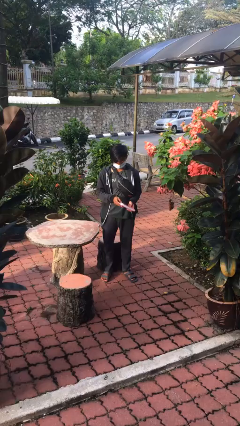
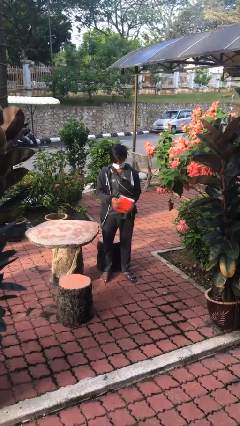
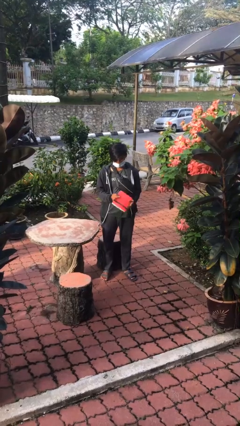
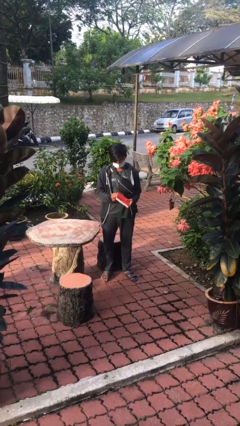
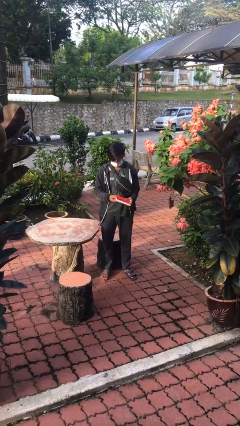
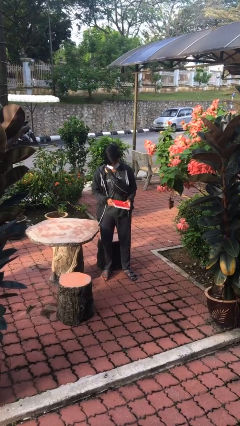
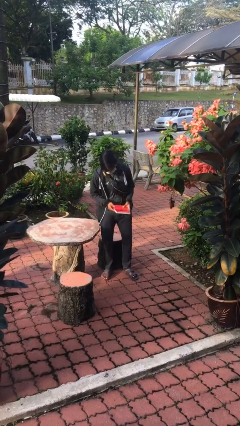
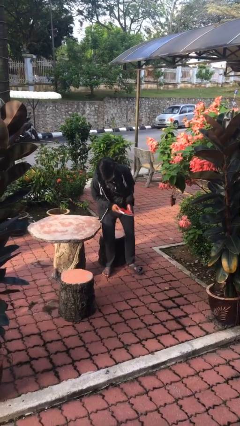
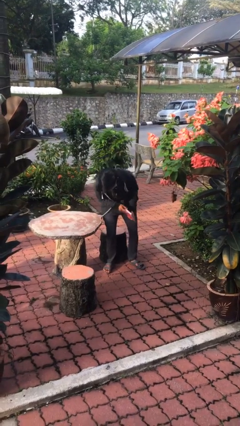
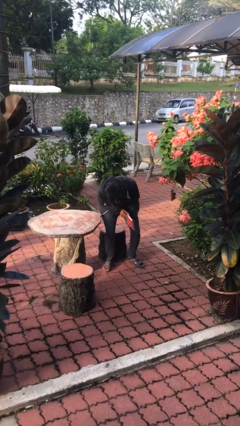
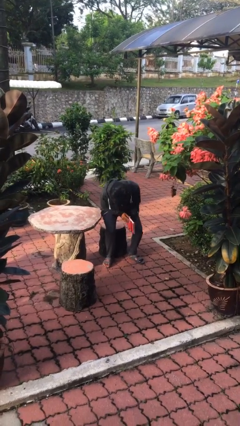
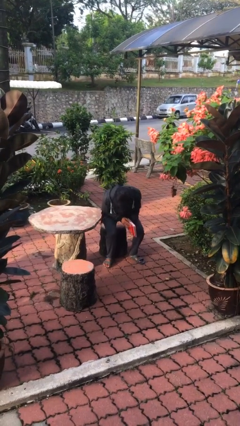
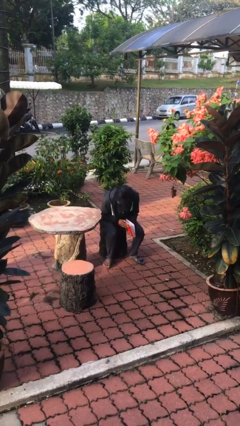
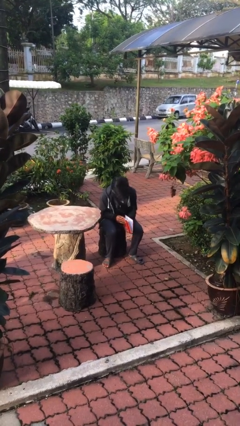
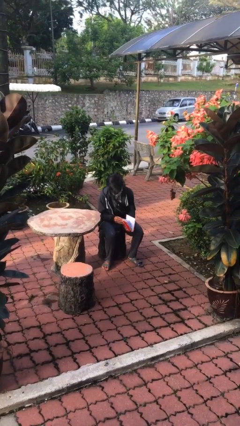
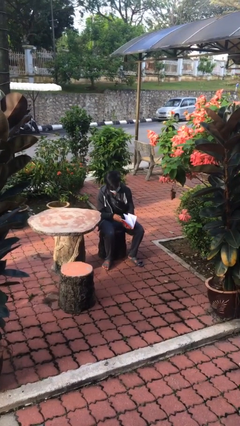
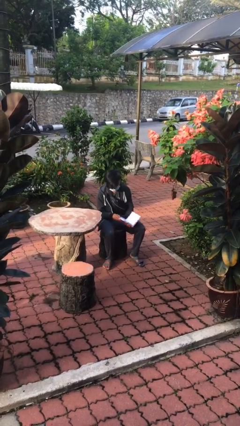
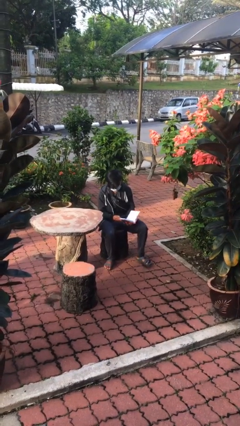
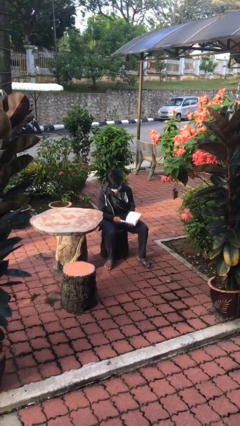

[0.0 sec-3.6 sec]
person sits down

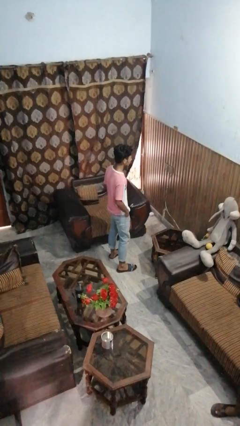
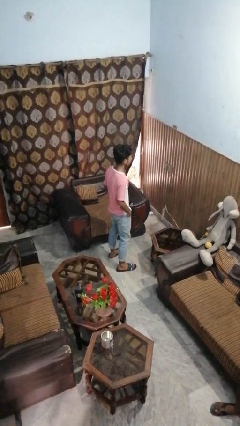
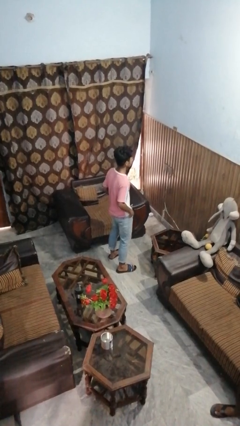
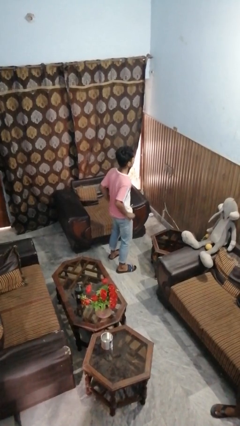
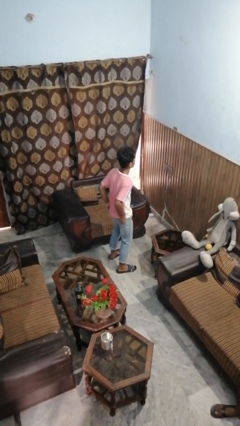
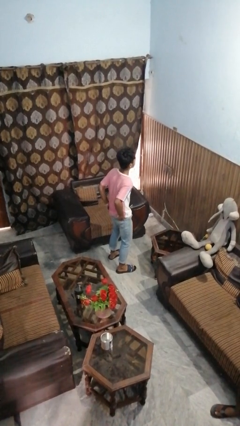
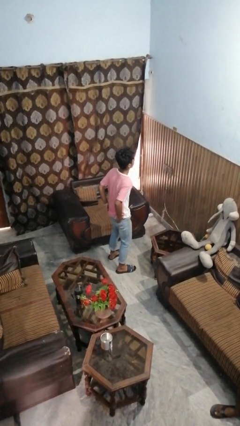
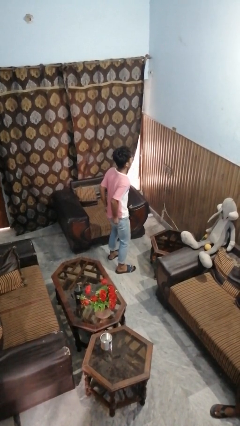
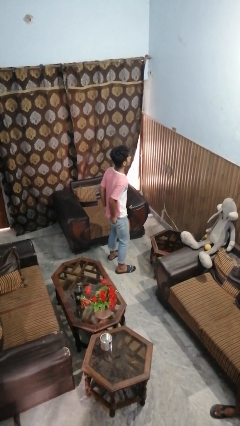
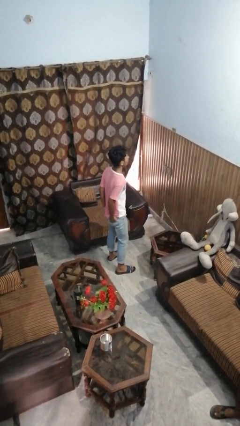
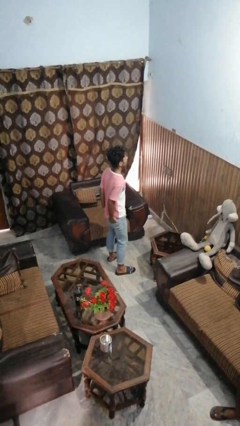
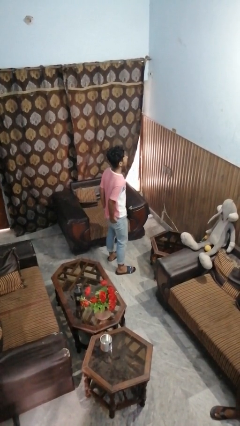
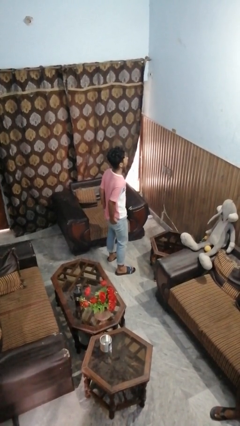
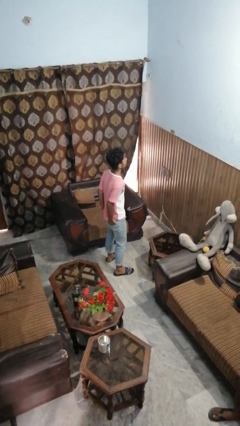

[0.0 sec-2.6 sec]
person puts hands in back pockets

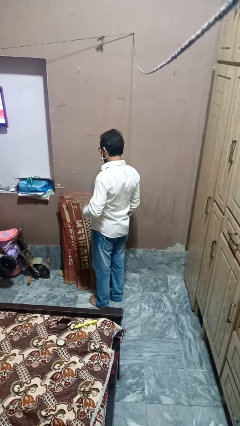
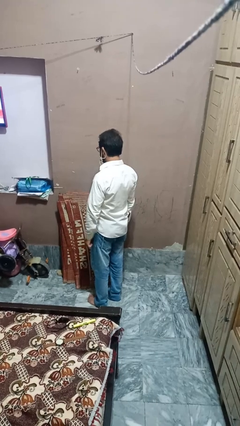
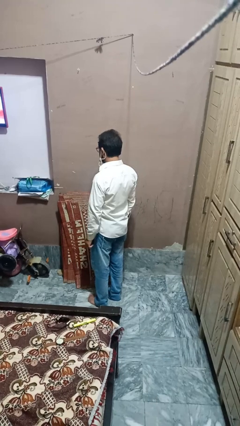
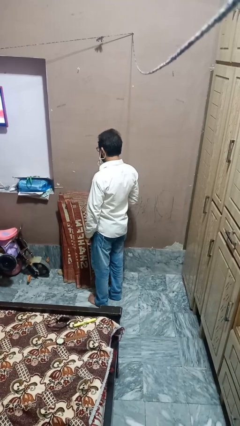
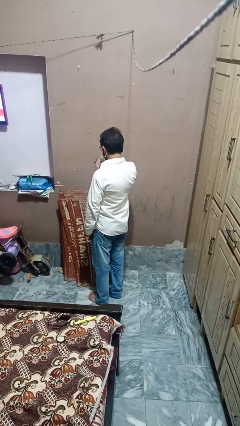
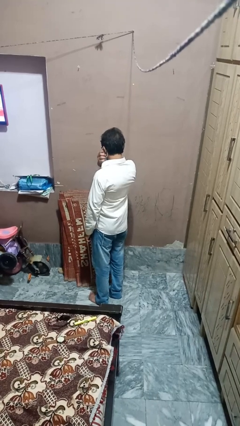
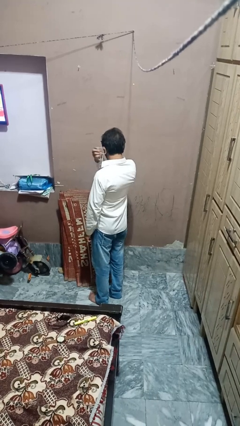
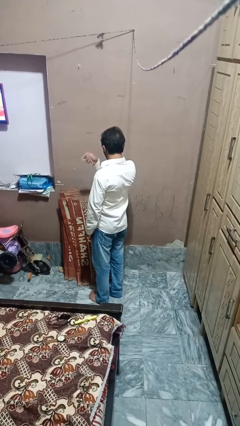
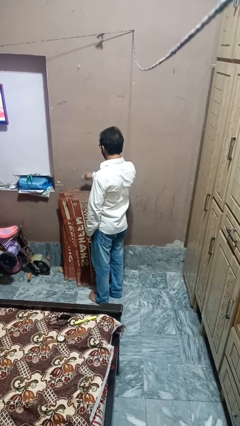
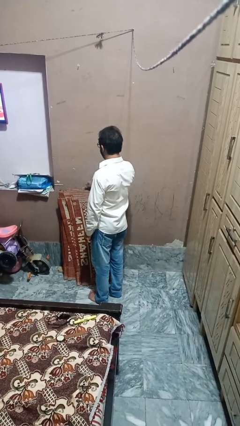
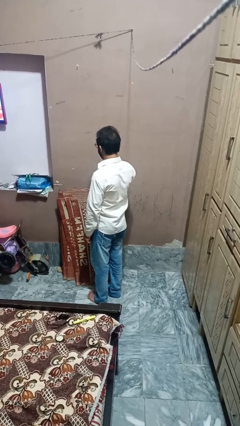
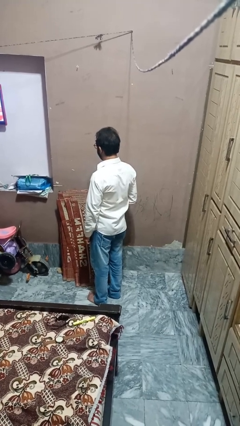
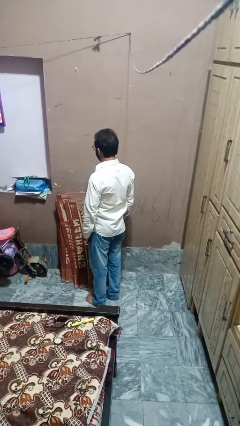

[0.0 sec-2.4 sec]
person takes off earrings

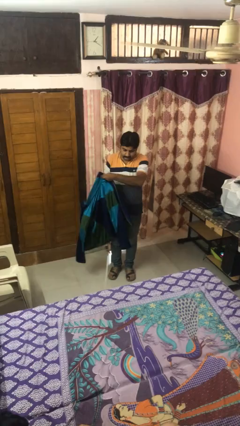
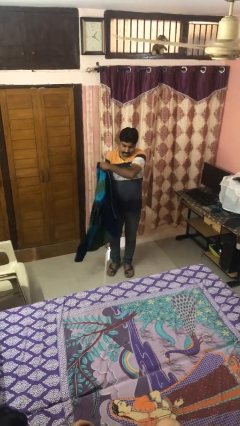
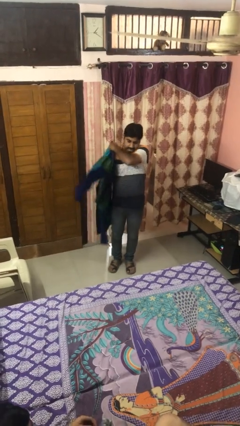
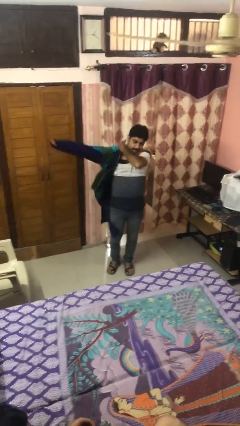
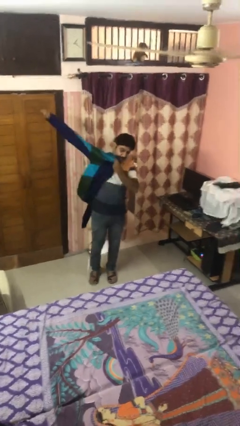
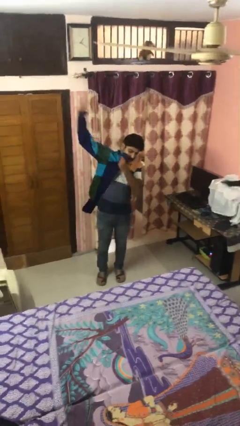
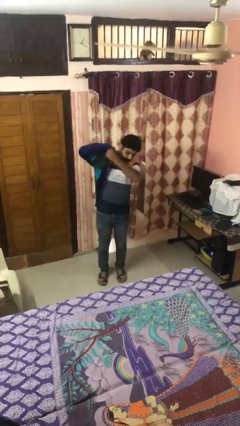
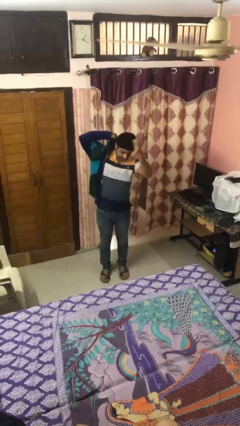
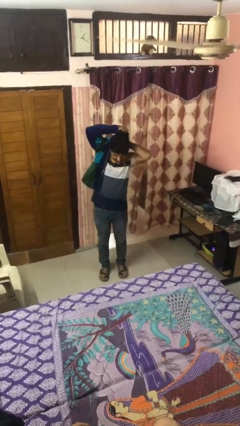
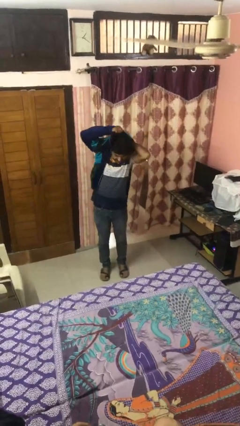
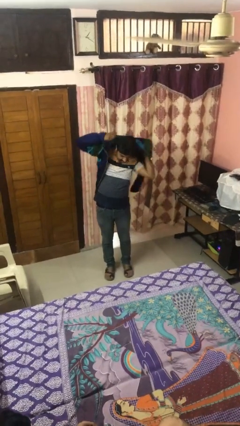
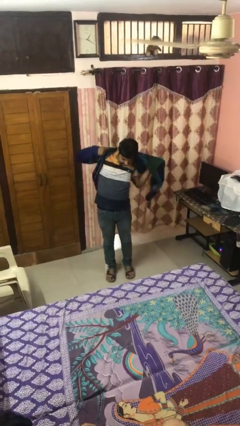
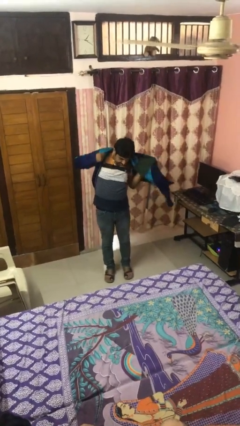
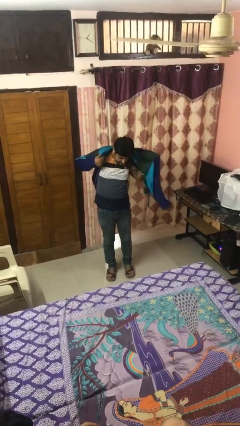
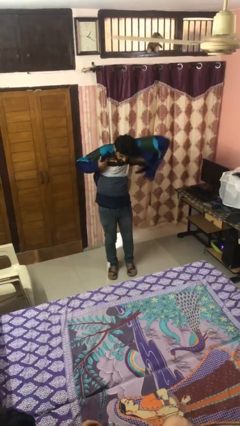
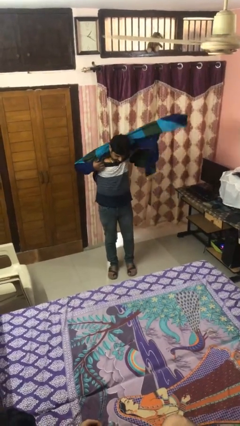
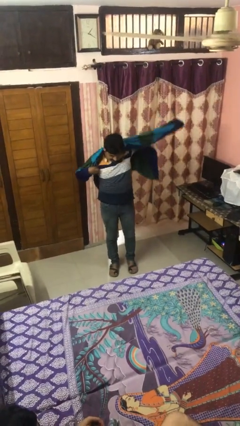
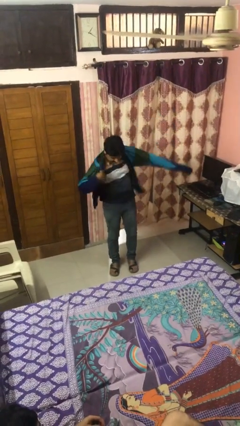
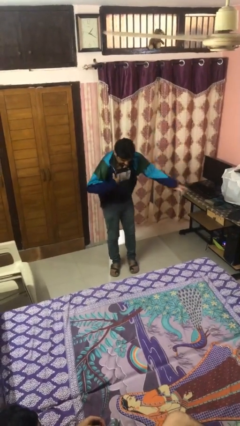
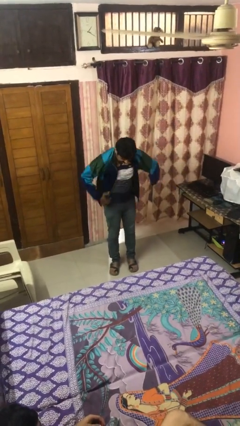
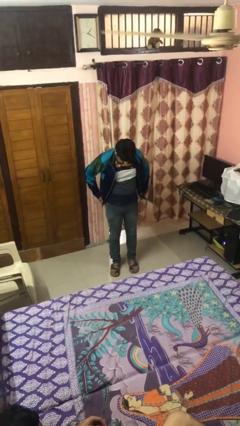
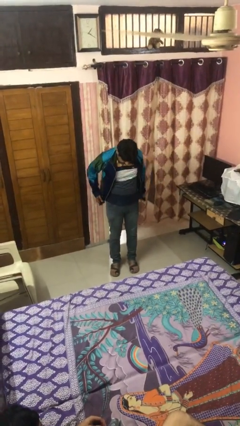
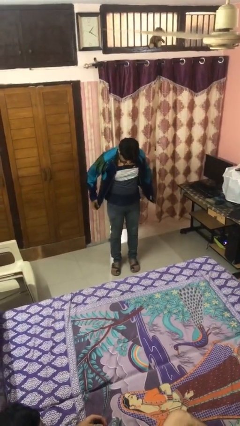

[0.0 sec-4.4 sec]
person puts on jacket

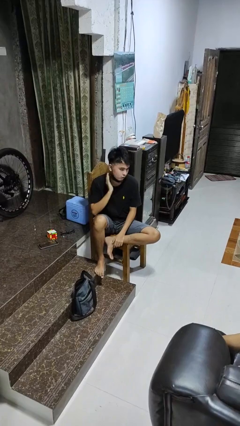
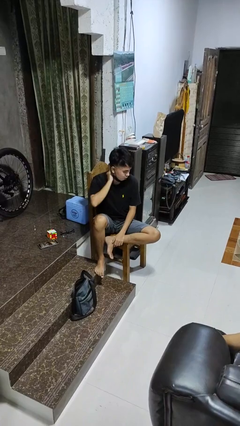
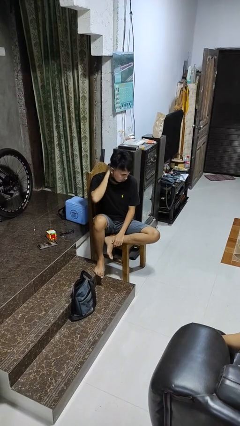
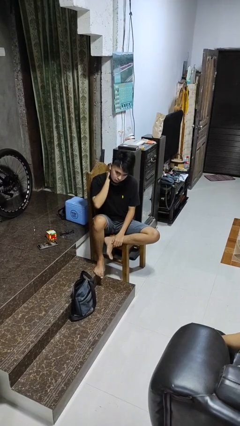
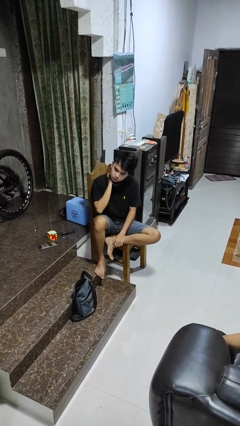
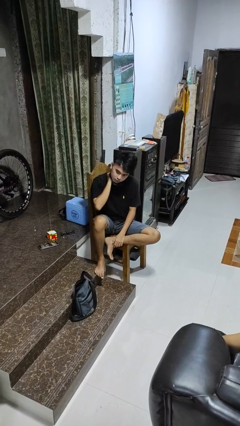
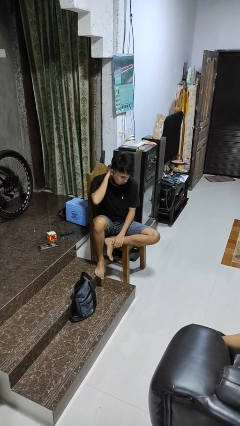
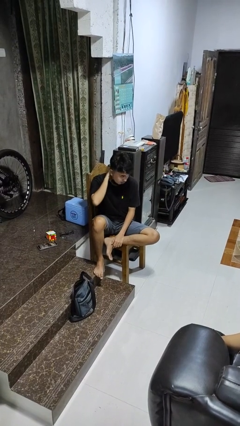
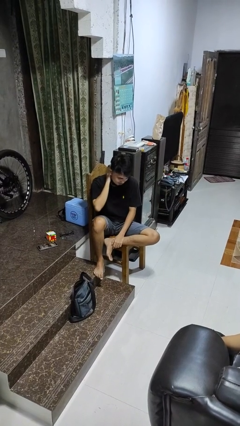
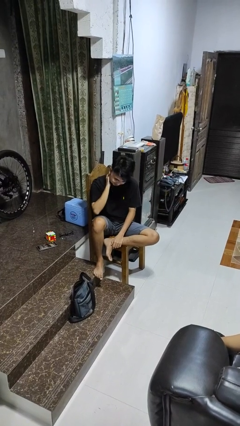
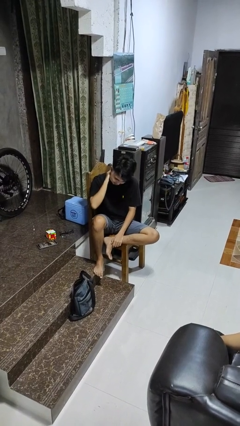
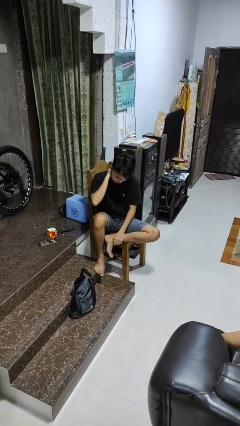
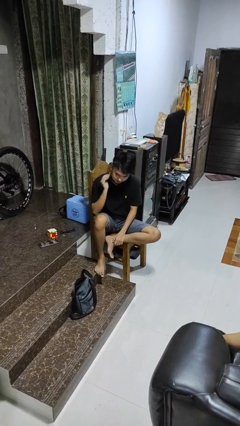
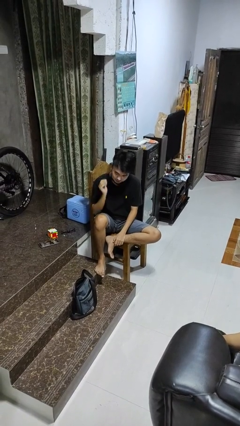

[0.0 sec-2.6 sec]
person rubs neck

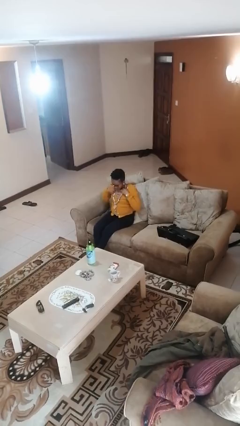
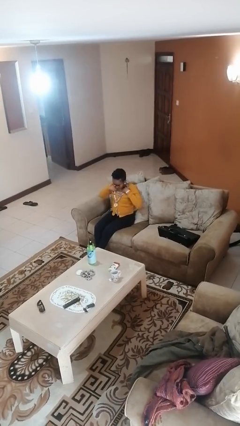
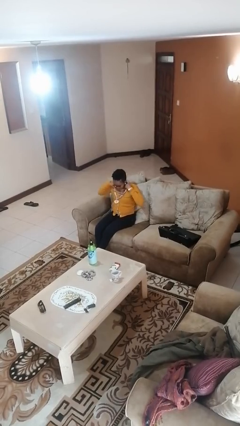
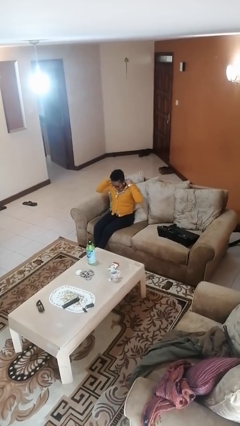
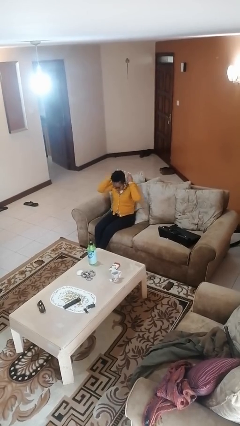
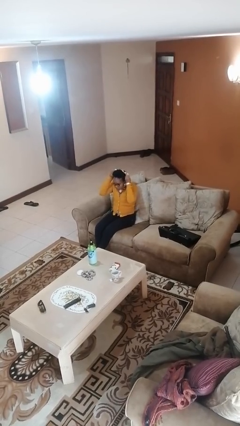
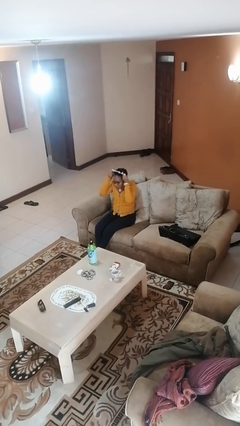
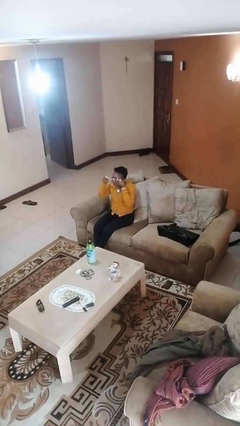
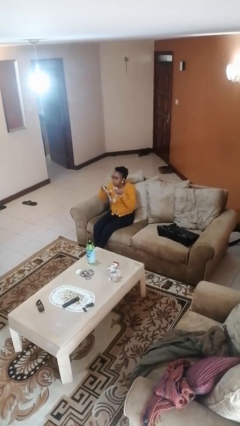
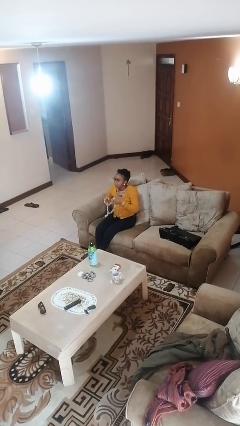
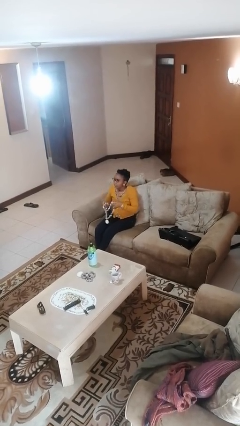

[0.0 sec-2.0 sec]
person takes off necklace
